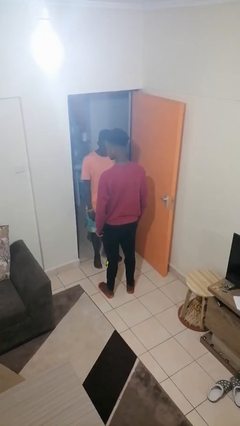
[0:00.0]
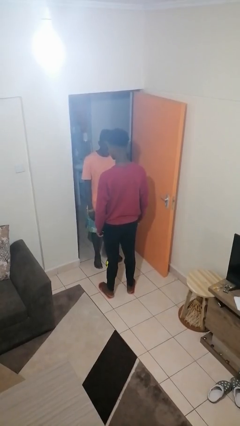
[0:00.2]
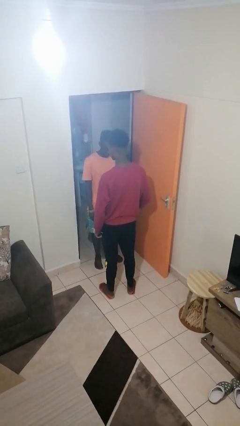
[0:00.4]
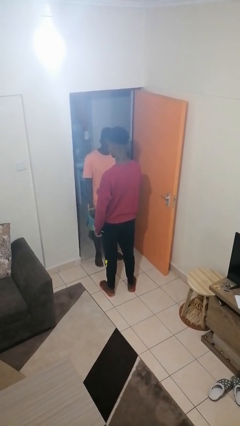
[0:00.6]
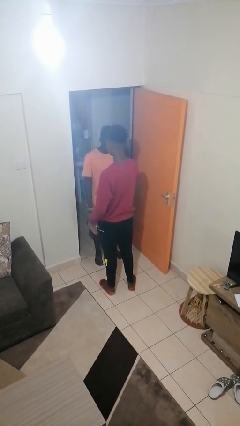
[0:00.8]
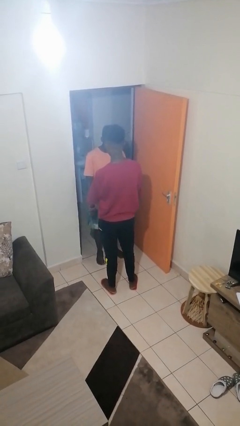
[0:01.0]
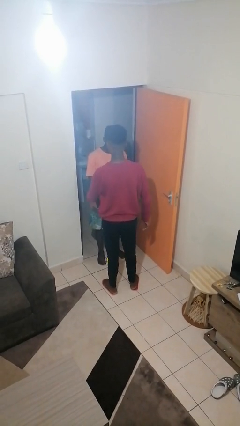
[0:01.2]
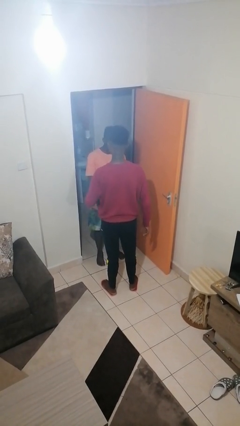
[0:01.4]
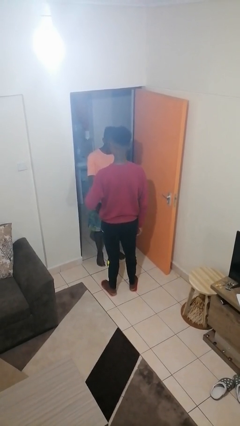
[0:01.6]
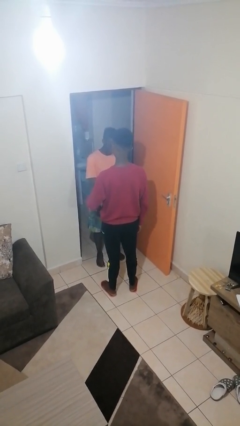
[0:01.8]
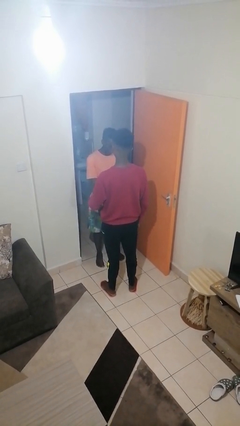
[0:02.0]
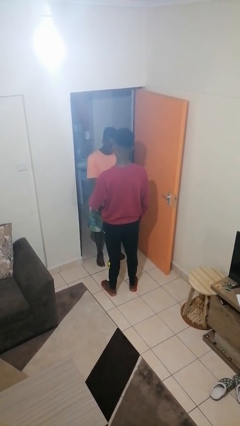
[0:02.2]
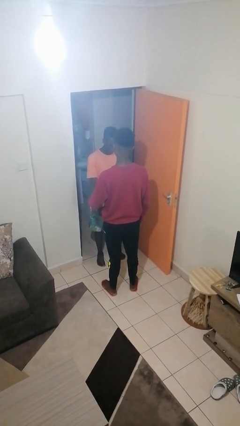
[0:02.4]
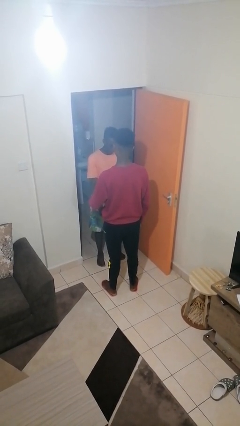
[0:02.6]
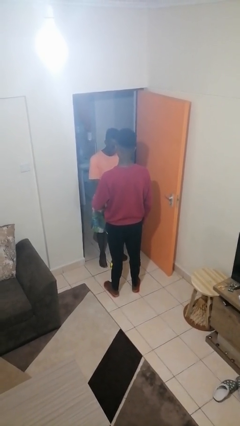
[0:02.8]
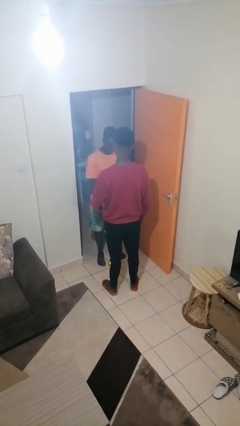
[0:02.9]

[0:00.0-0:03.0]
person grabs person by forearm

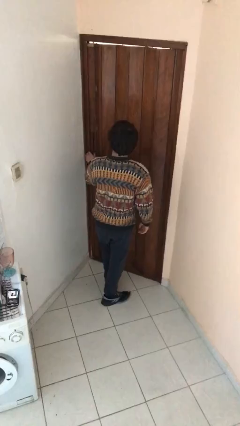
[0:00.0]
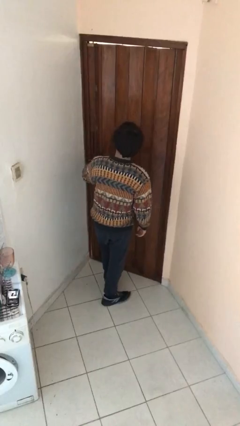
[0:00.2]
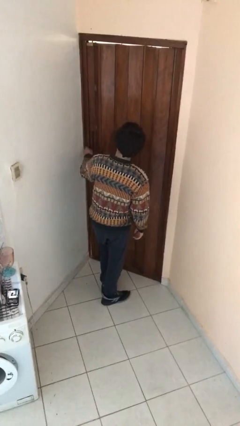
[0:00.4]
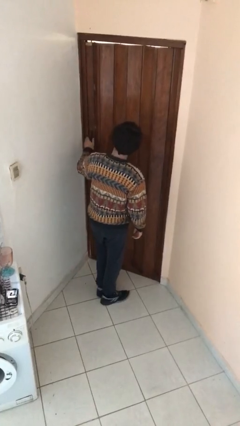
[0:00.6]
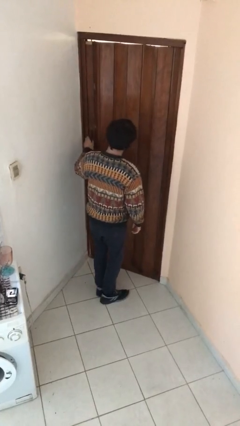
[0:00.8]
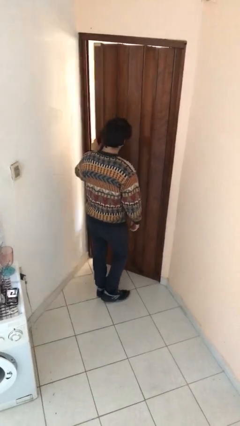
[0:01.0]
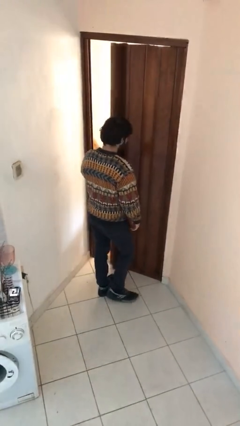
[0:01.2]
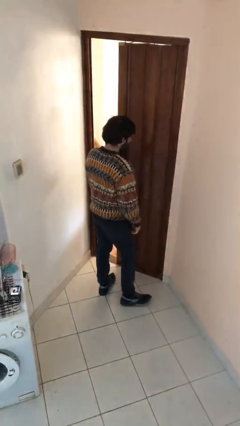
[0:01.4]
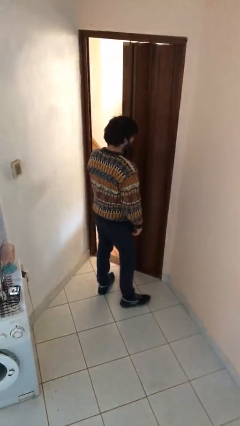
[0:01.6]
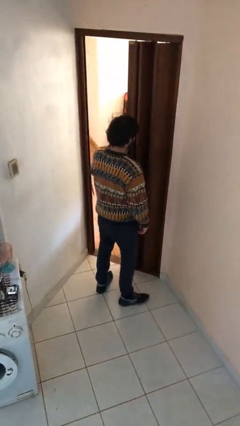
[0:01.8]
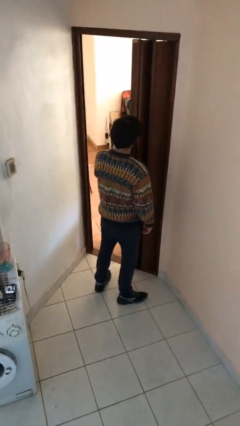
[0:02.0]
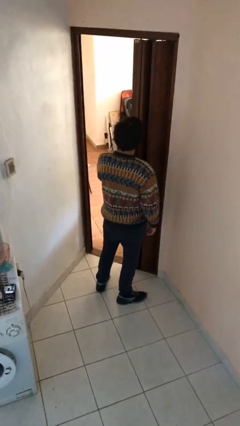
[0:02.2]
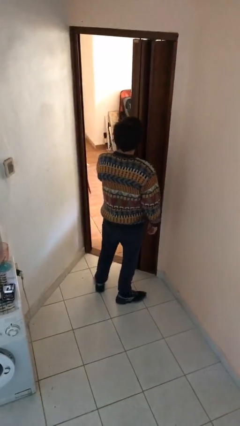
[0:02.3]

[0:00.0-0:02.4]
person opens sliding door

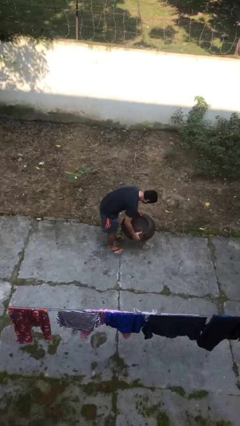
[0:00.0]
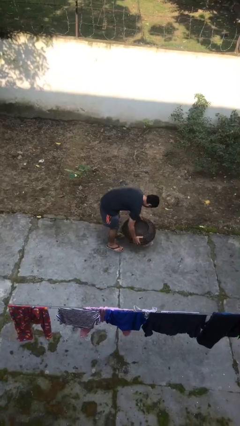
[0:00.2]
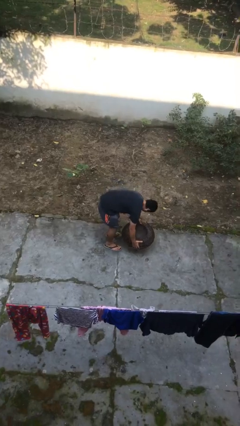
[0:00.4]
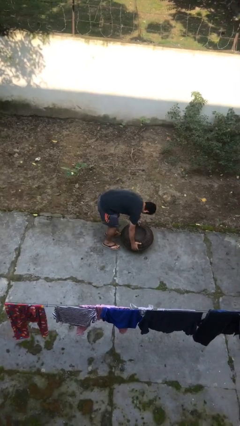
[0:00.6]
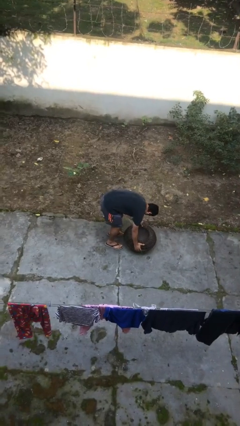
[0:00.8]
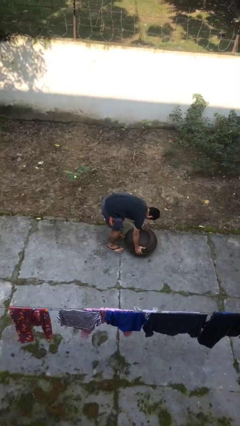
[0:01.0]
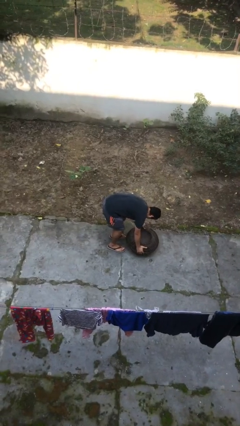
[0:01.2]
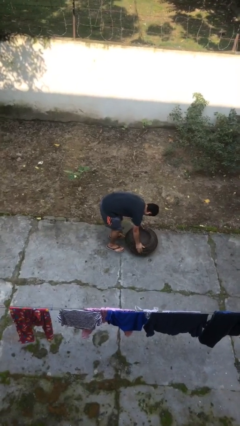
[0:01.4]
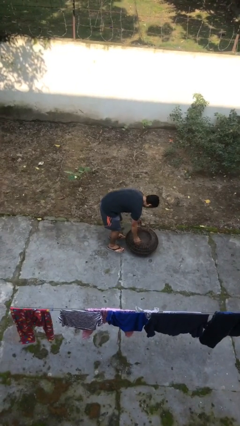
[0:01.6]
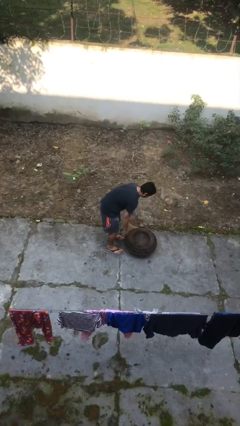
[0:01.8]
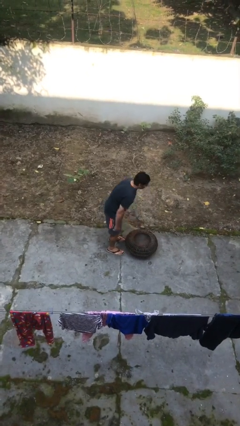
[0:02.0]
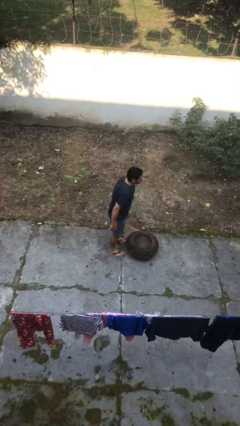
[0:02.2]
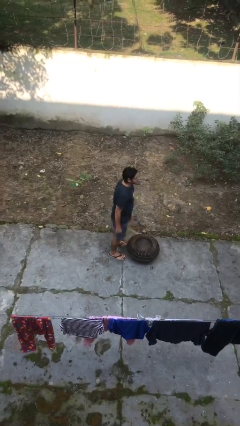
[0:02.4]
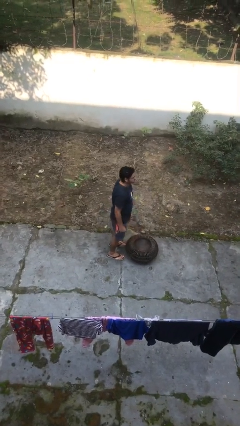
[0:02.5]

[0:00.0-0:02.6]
person puts down object on floor

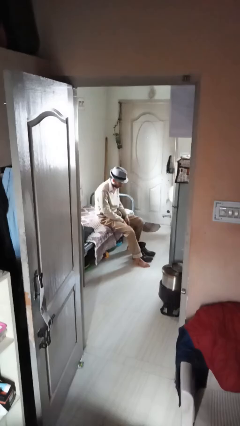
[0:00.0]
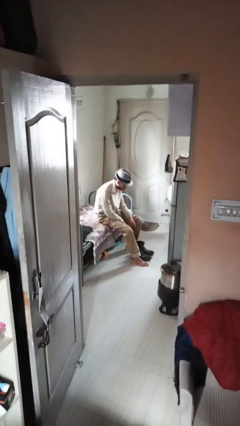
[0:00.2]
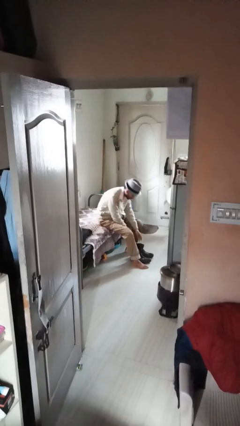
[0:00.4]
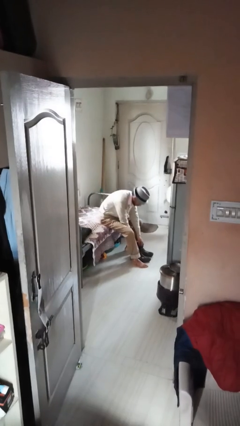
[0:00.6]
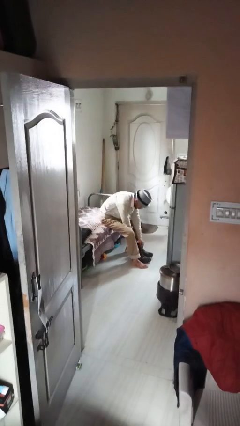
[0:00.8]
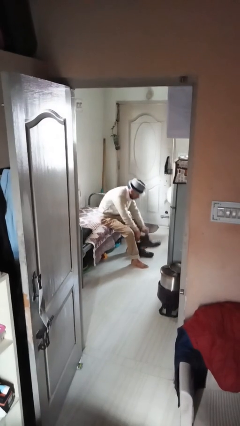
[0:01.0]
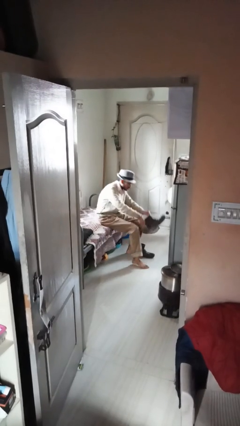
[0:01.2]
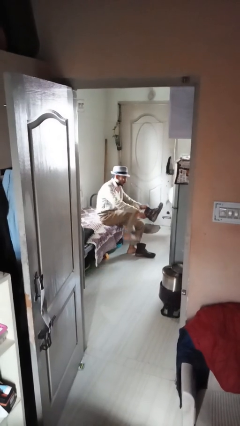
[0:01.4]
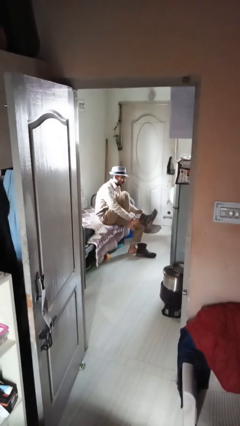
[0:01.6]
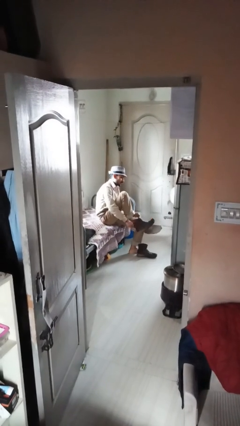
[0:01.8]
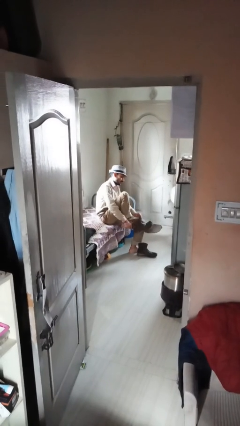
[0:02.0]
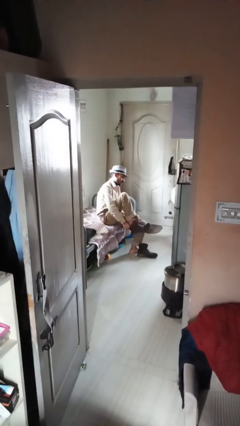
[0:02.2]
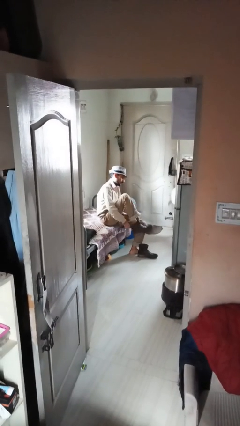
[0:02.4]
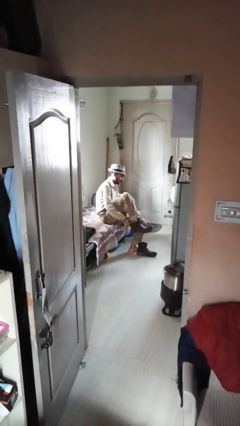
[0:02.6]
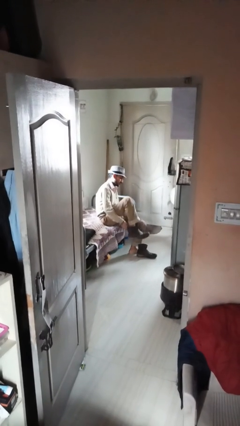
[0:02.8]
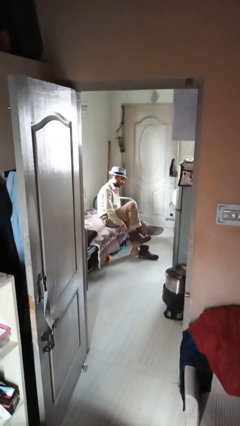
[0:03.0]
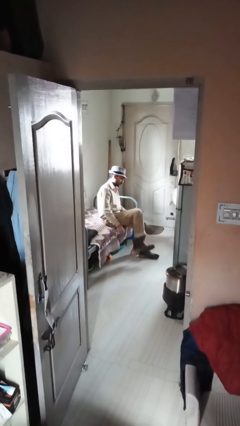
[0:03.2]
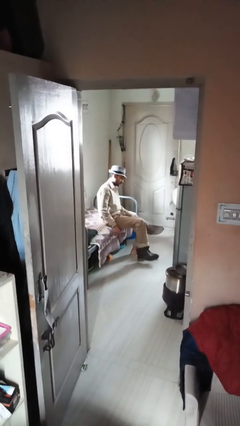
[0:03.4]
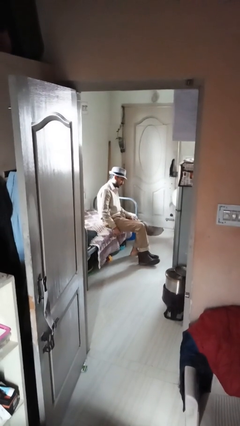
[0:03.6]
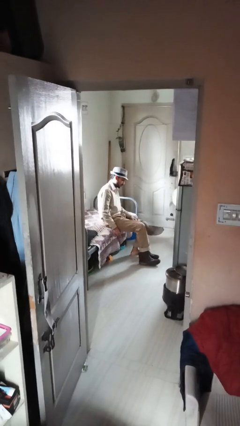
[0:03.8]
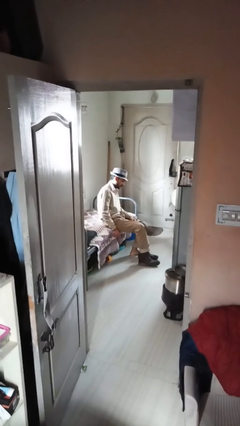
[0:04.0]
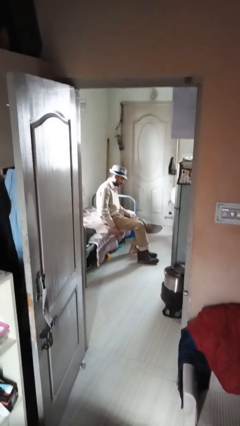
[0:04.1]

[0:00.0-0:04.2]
person puts on boots

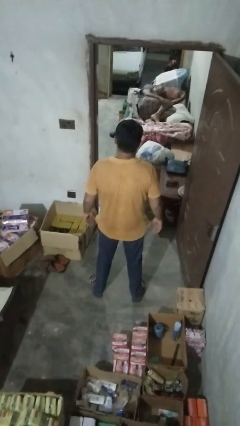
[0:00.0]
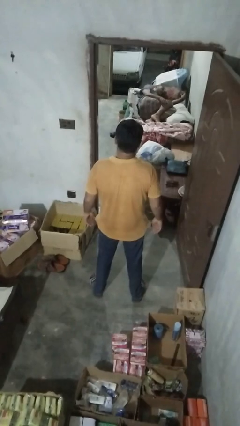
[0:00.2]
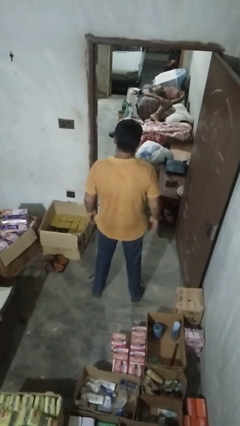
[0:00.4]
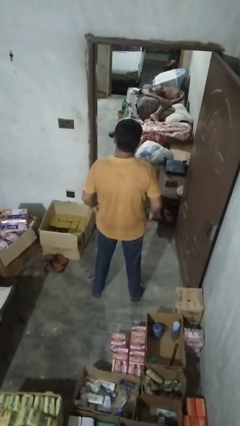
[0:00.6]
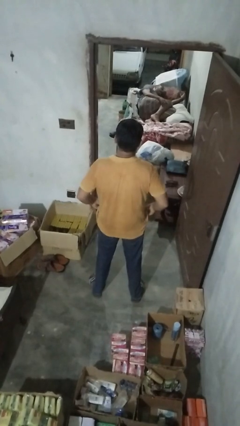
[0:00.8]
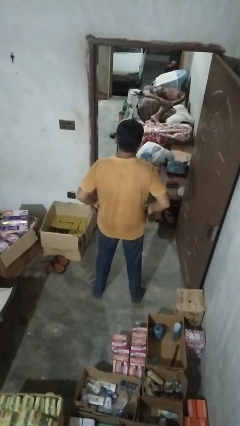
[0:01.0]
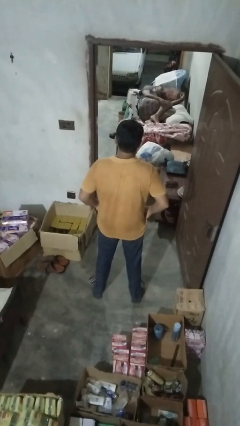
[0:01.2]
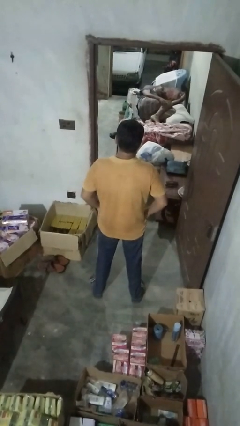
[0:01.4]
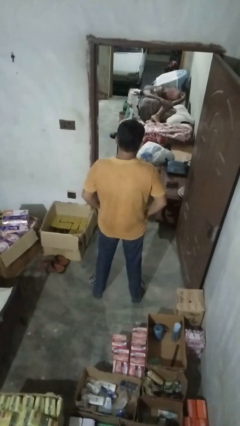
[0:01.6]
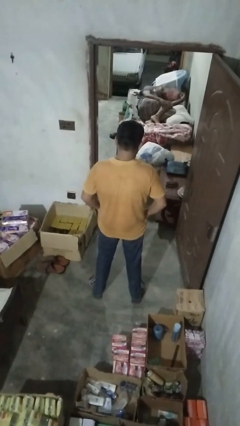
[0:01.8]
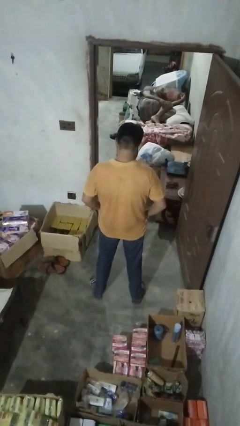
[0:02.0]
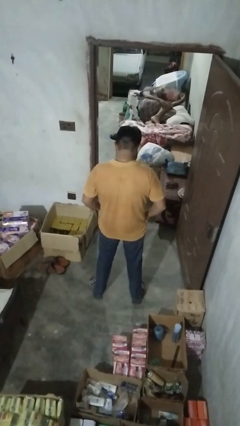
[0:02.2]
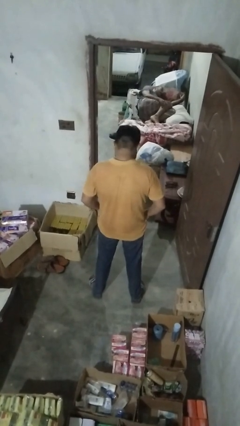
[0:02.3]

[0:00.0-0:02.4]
person puts hands in back pockets

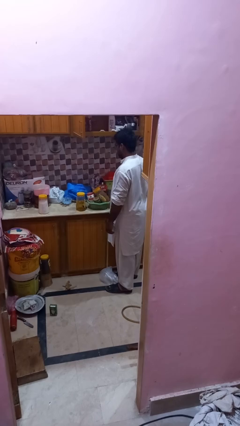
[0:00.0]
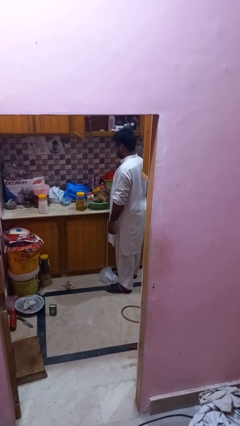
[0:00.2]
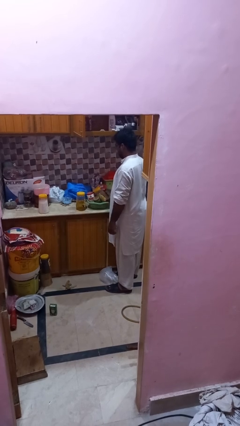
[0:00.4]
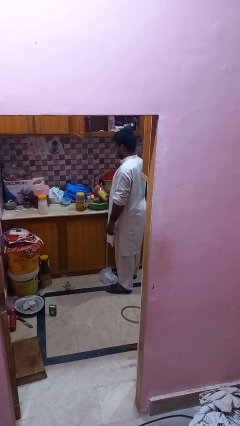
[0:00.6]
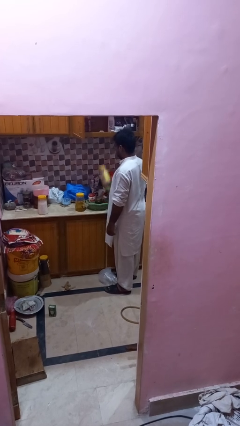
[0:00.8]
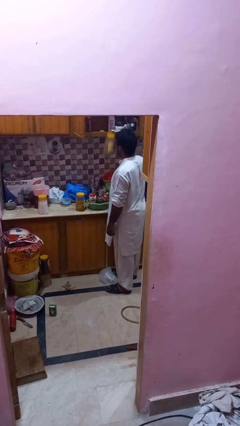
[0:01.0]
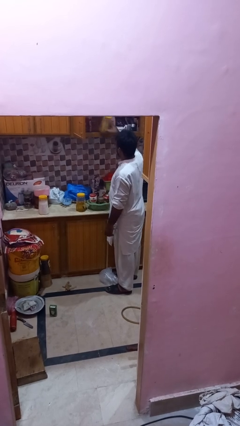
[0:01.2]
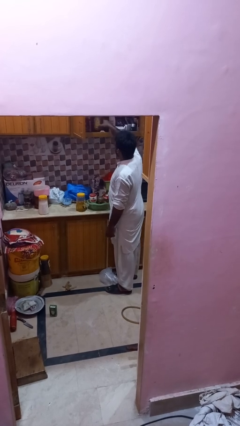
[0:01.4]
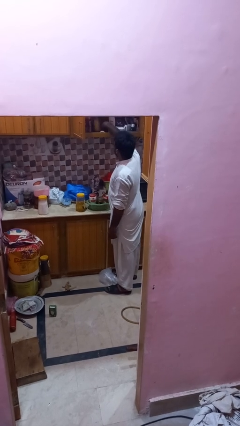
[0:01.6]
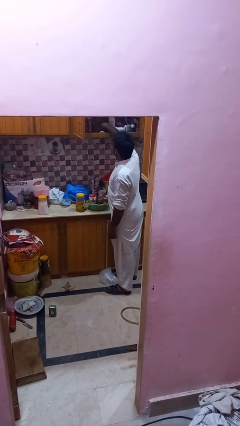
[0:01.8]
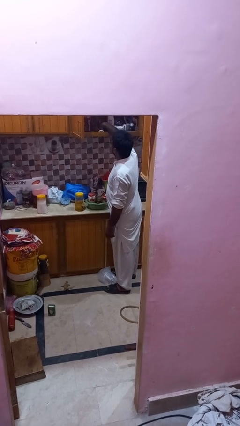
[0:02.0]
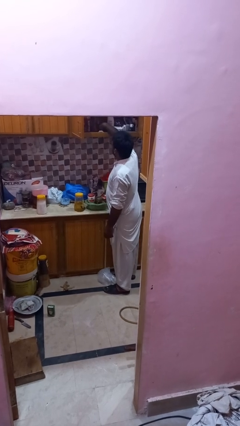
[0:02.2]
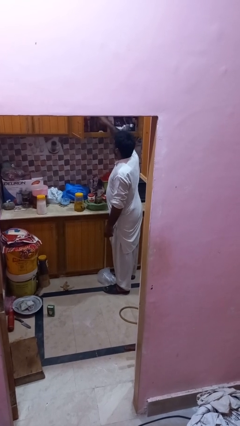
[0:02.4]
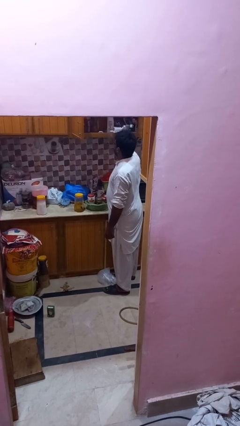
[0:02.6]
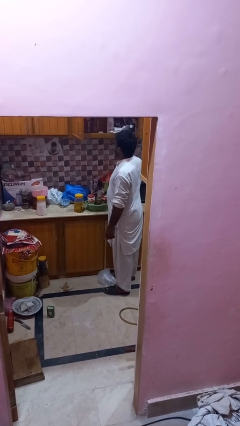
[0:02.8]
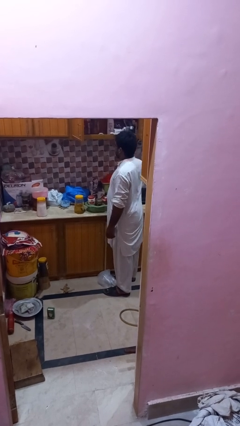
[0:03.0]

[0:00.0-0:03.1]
person loads groceries into cabinet
